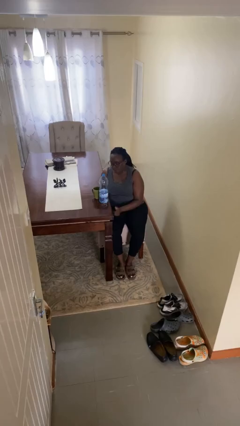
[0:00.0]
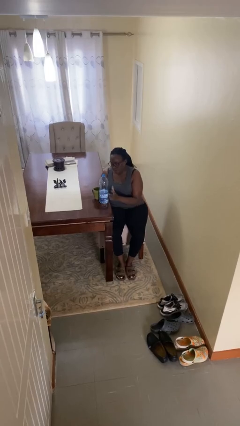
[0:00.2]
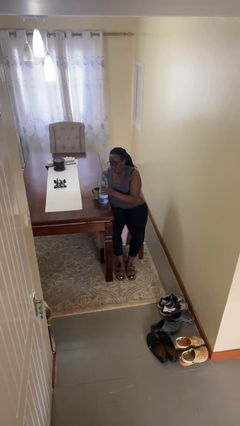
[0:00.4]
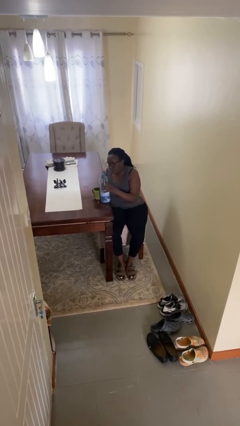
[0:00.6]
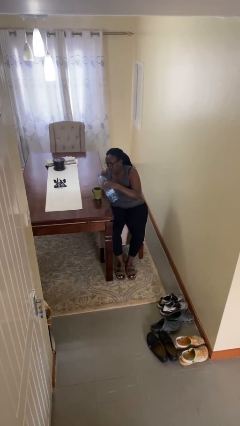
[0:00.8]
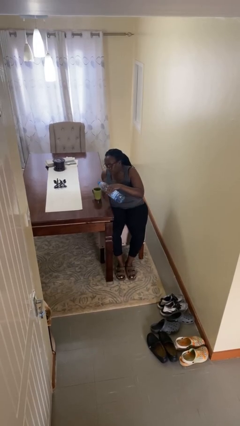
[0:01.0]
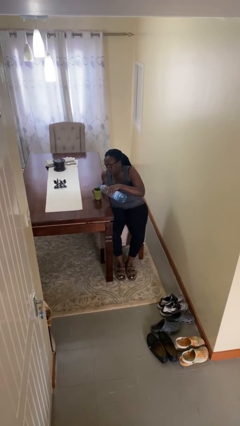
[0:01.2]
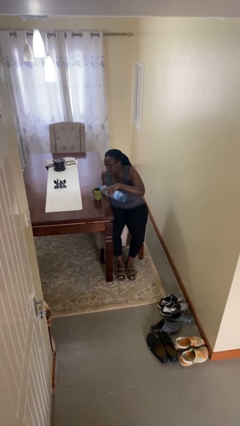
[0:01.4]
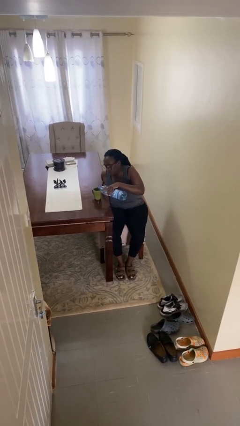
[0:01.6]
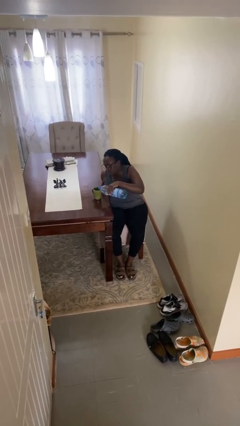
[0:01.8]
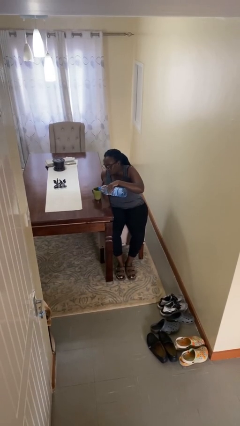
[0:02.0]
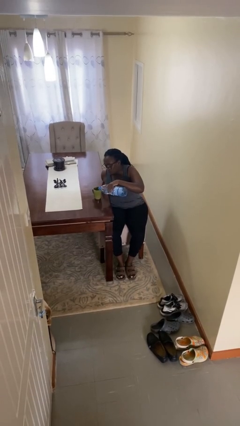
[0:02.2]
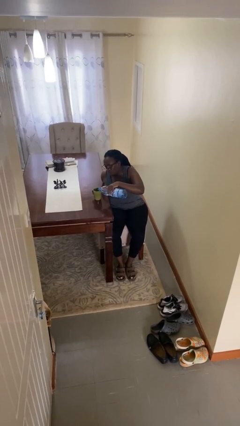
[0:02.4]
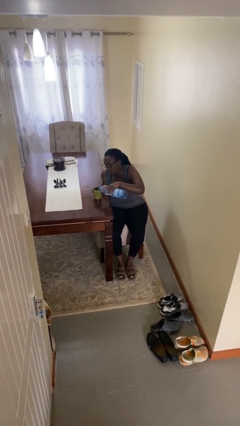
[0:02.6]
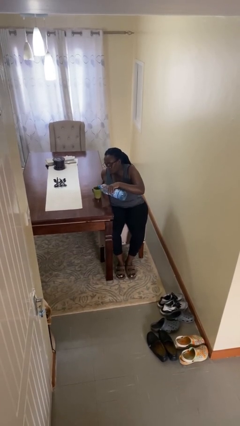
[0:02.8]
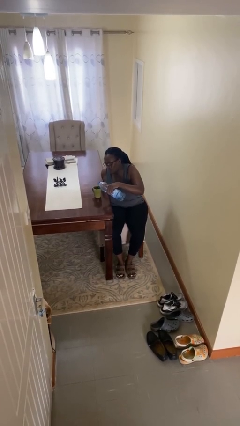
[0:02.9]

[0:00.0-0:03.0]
person pours liquid into cup

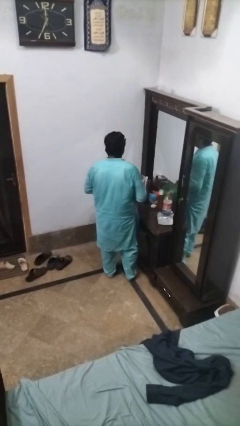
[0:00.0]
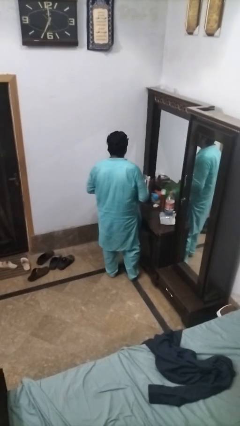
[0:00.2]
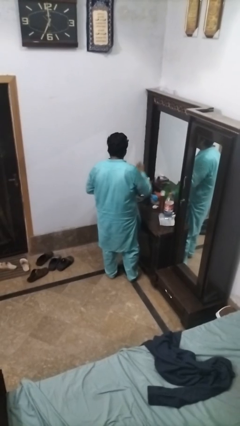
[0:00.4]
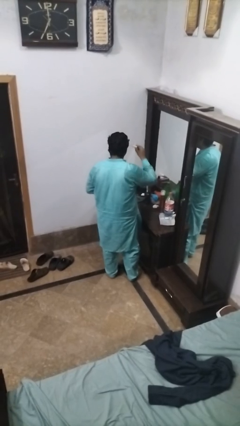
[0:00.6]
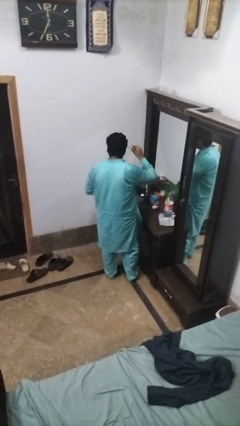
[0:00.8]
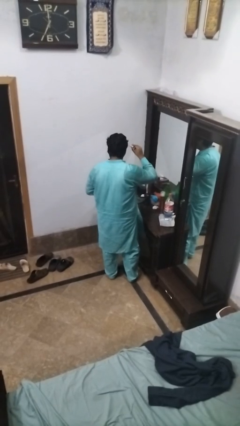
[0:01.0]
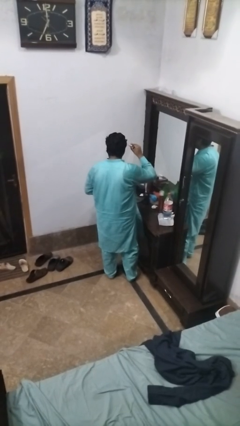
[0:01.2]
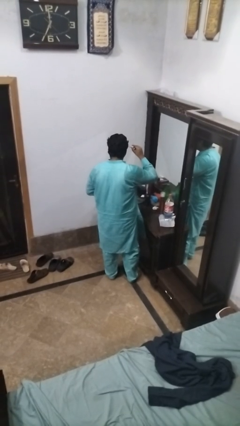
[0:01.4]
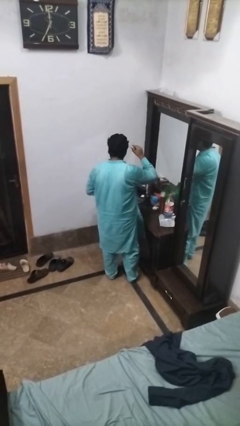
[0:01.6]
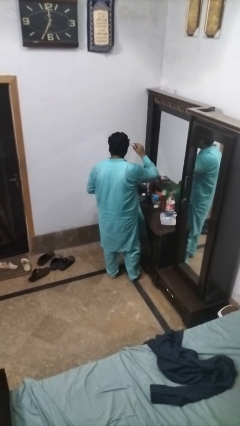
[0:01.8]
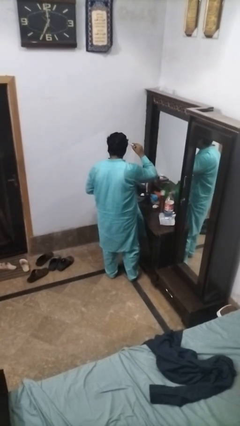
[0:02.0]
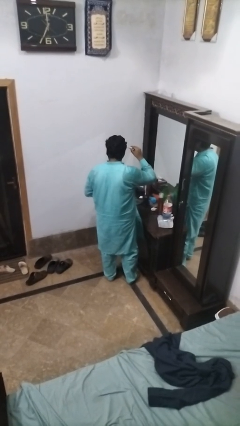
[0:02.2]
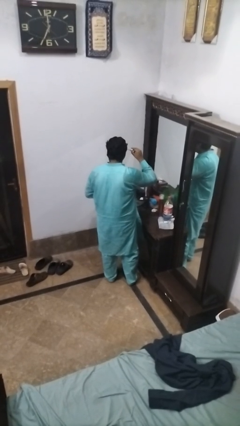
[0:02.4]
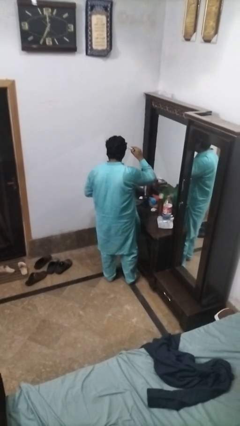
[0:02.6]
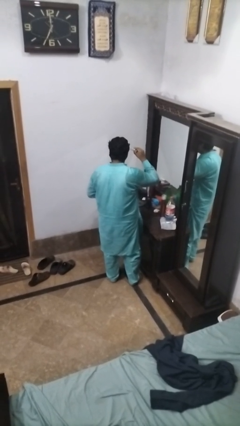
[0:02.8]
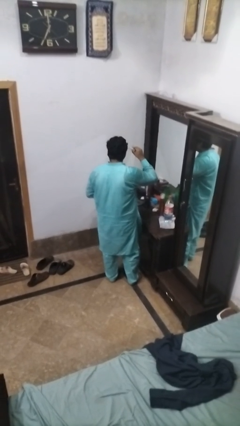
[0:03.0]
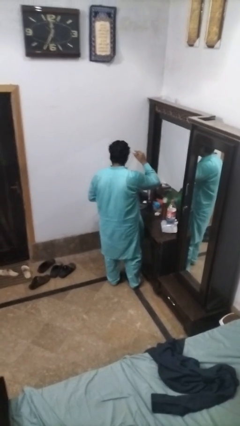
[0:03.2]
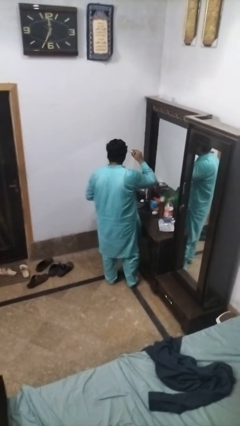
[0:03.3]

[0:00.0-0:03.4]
person applies eye makeup

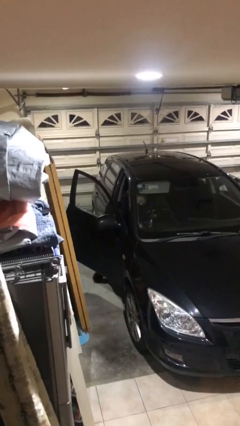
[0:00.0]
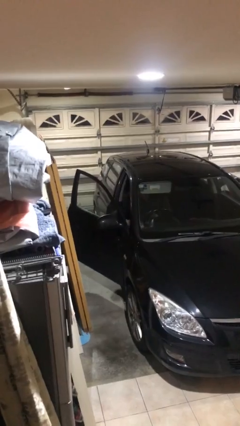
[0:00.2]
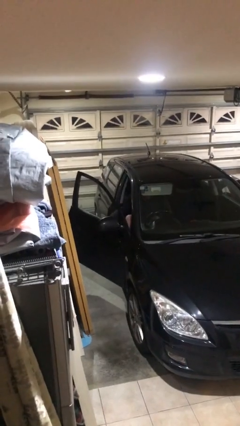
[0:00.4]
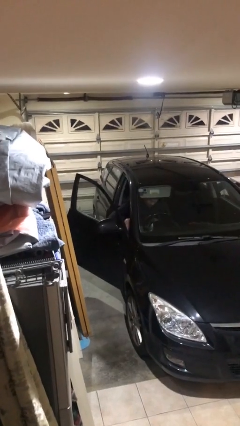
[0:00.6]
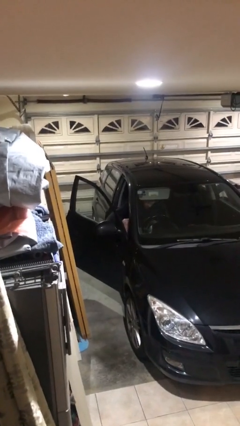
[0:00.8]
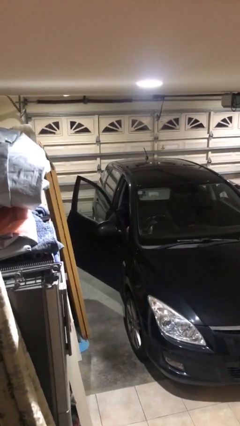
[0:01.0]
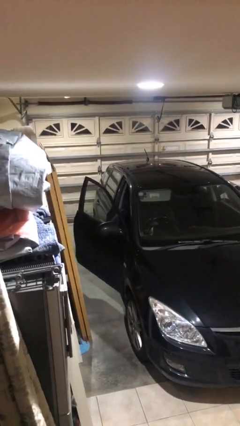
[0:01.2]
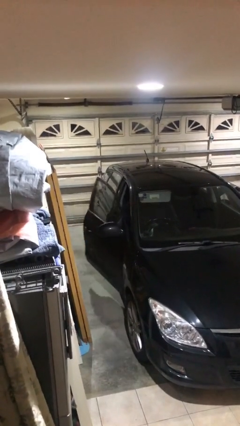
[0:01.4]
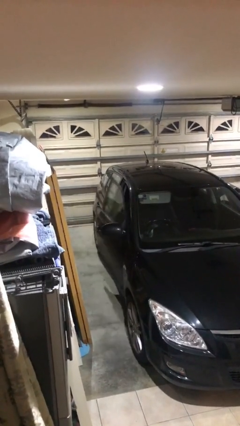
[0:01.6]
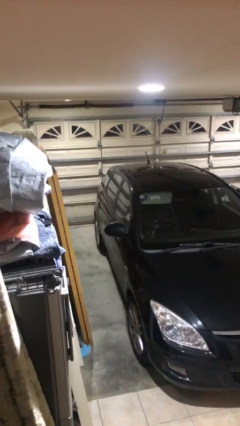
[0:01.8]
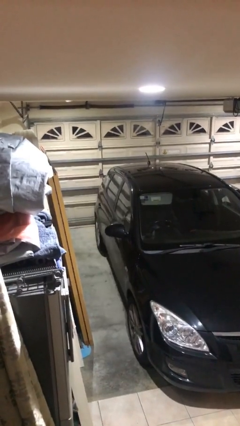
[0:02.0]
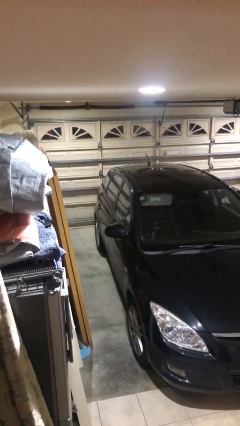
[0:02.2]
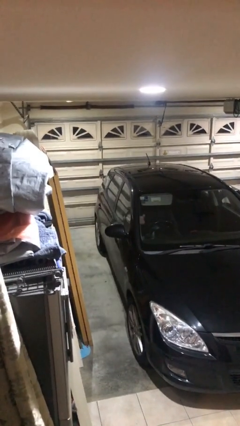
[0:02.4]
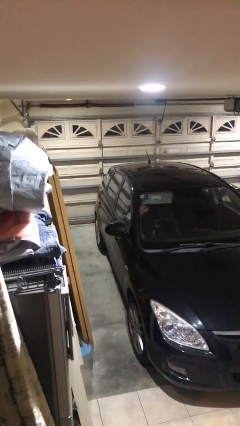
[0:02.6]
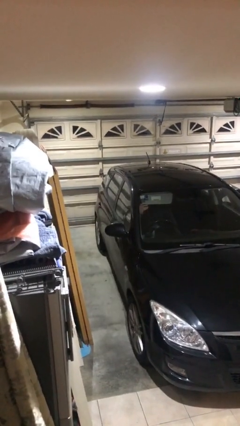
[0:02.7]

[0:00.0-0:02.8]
person closes car door

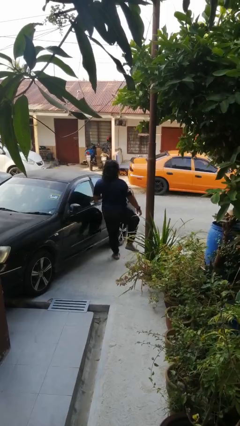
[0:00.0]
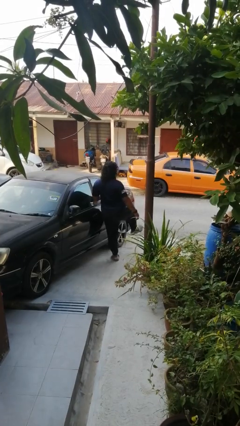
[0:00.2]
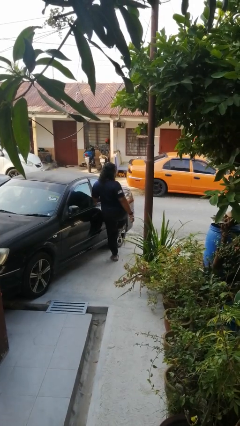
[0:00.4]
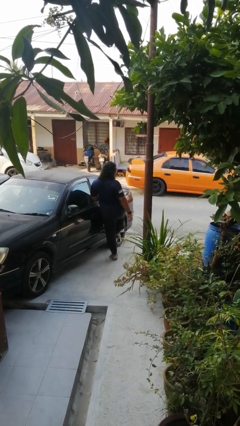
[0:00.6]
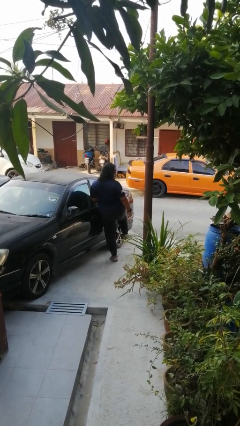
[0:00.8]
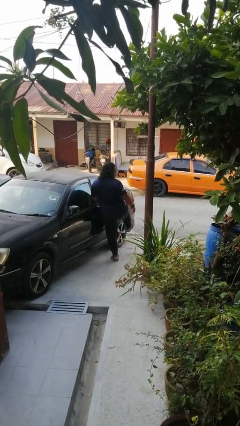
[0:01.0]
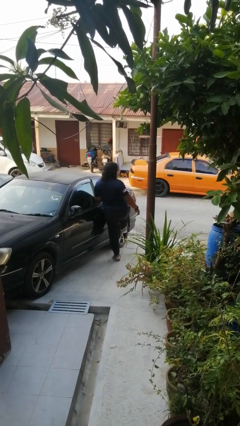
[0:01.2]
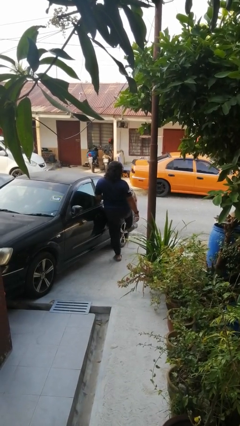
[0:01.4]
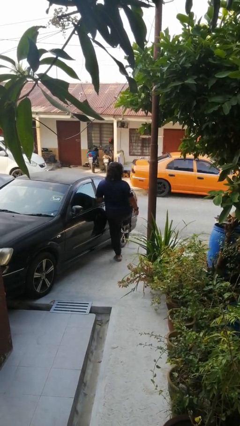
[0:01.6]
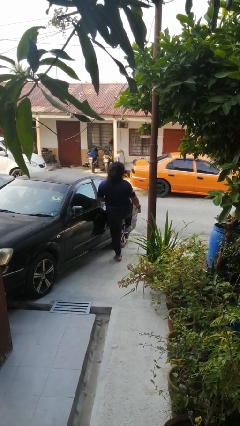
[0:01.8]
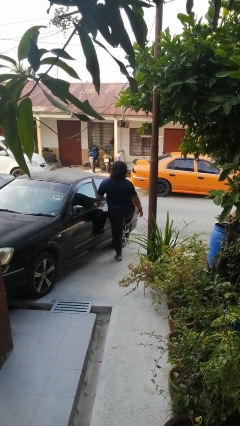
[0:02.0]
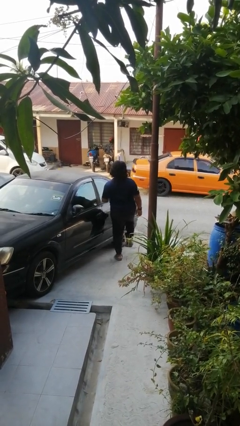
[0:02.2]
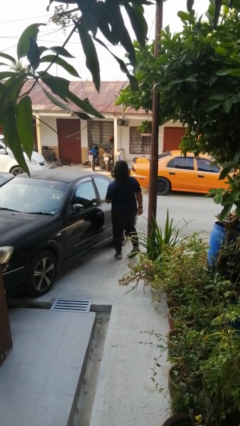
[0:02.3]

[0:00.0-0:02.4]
person kicks car tires

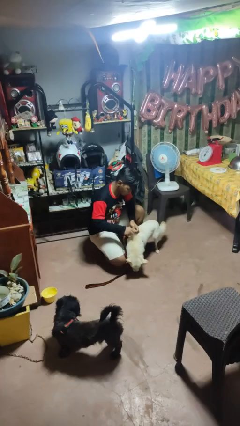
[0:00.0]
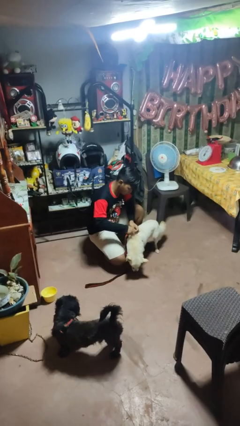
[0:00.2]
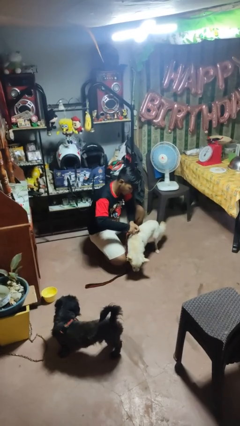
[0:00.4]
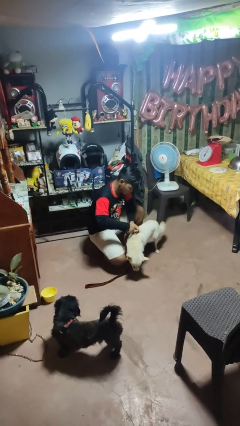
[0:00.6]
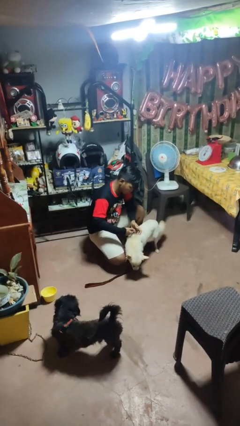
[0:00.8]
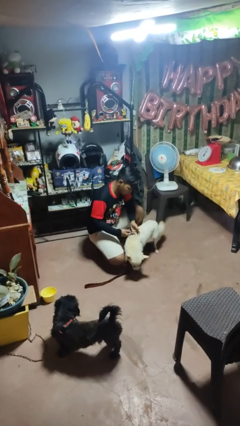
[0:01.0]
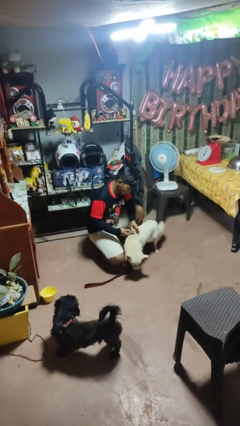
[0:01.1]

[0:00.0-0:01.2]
person attaches leash to dog

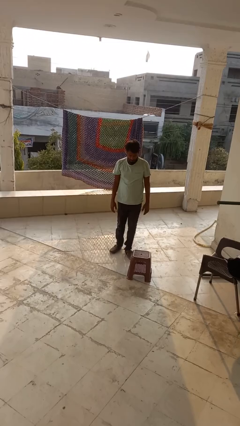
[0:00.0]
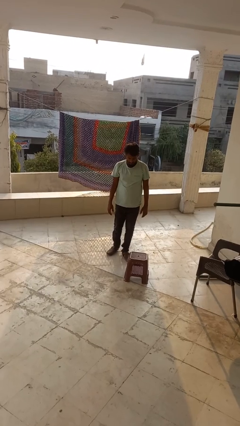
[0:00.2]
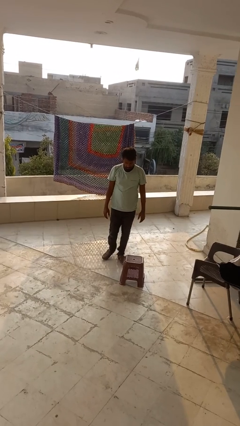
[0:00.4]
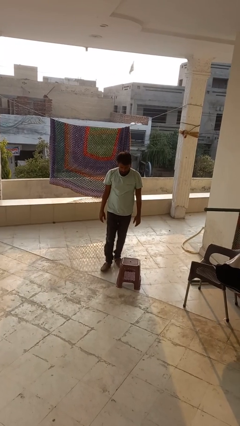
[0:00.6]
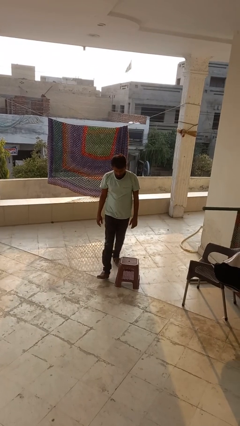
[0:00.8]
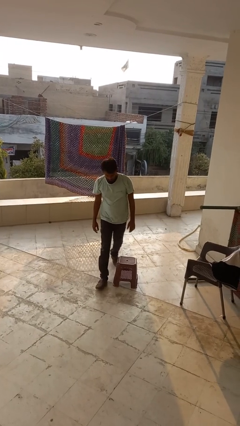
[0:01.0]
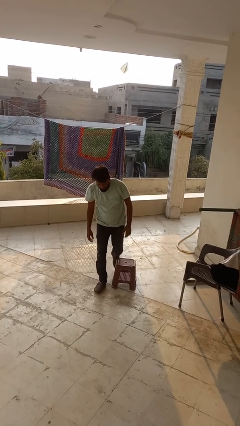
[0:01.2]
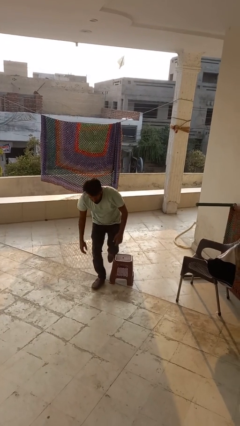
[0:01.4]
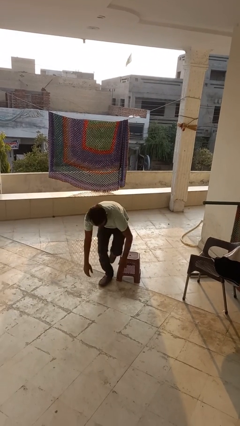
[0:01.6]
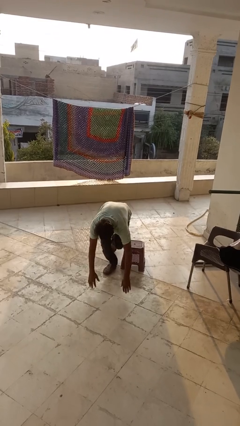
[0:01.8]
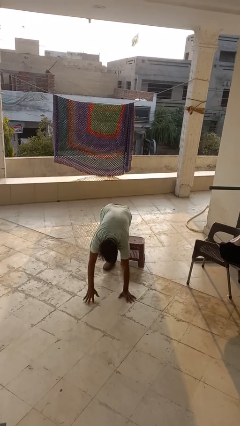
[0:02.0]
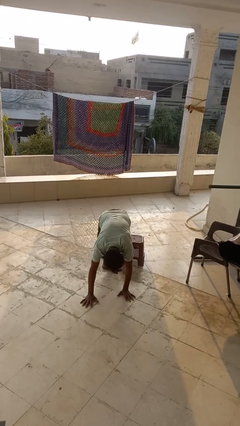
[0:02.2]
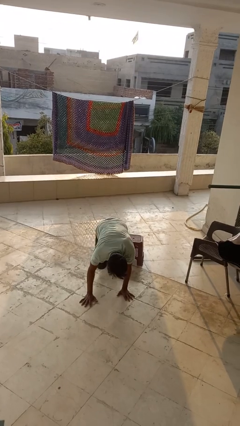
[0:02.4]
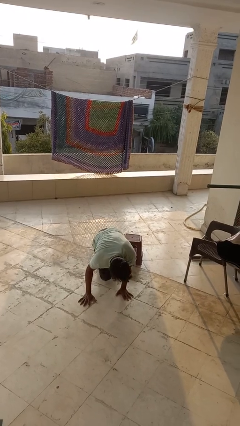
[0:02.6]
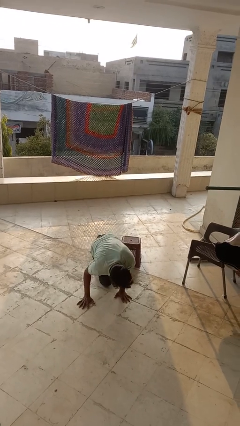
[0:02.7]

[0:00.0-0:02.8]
person trips on object on floor

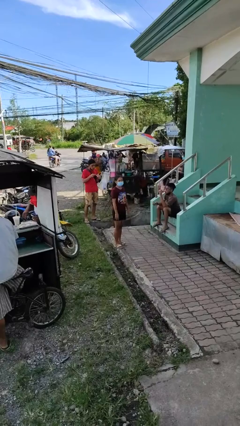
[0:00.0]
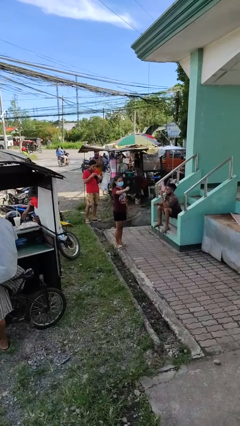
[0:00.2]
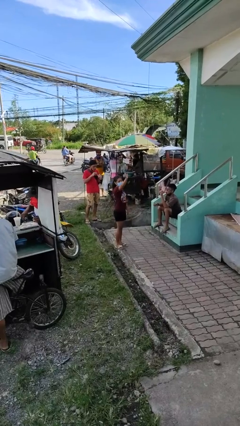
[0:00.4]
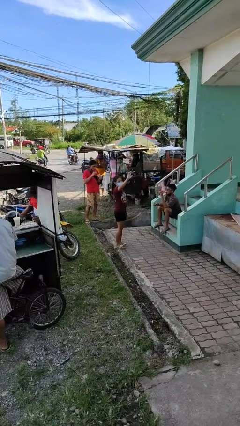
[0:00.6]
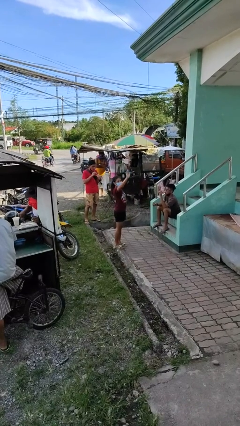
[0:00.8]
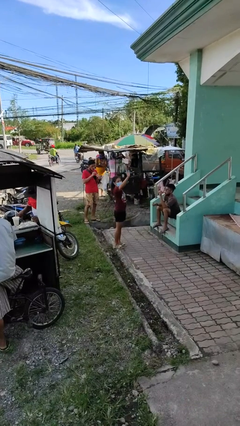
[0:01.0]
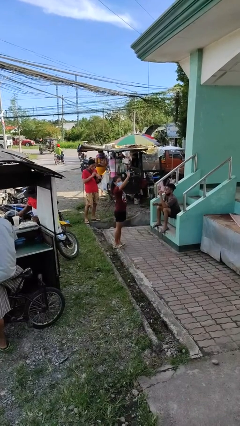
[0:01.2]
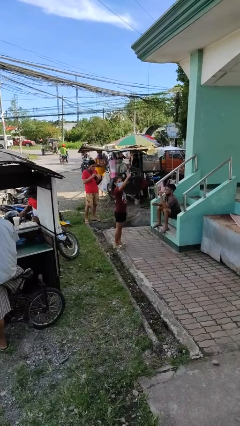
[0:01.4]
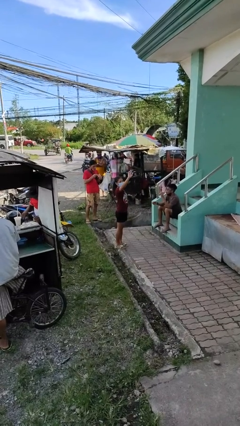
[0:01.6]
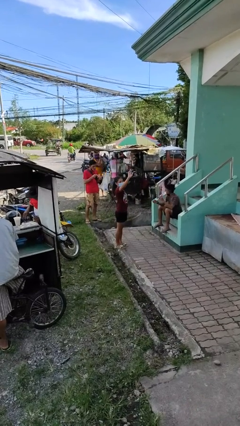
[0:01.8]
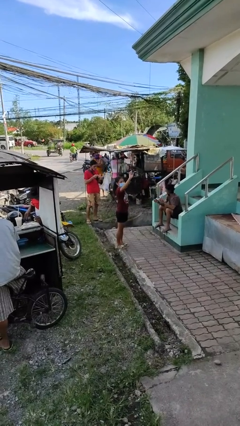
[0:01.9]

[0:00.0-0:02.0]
person waves at person
